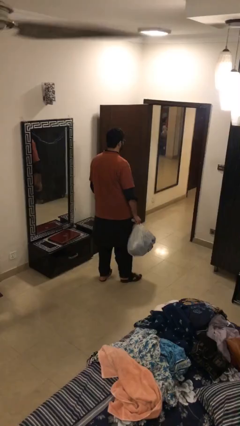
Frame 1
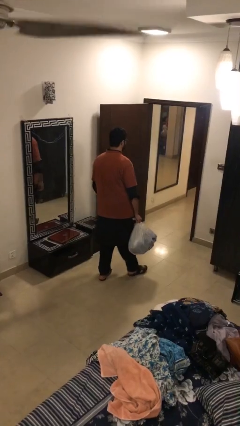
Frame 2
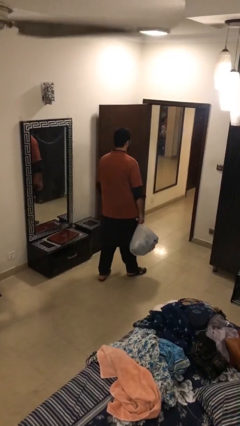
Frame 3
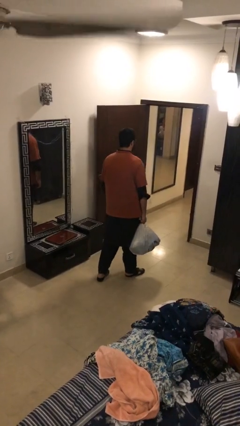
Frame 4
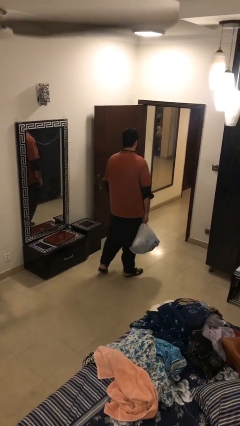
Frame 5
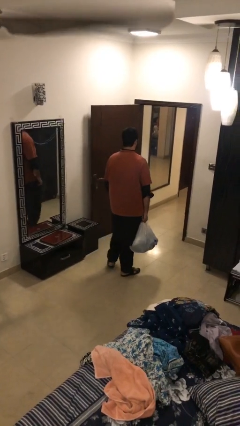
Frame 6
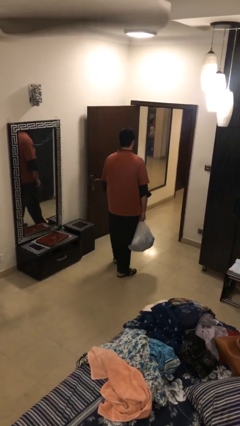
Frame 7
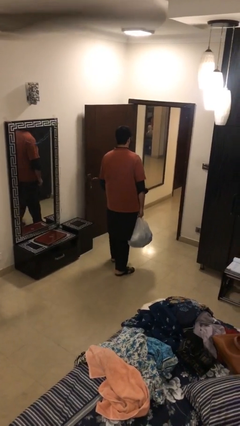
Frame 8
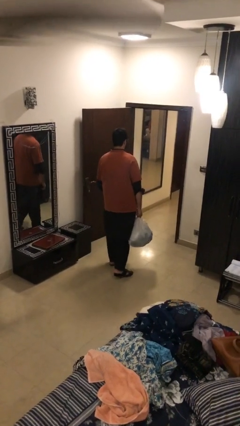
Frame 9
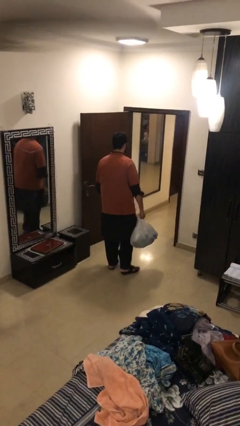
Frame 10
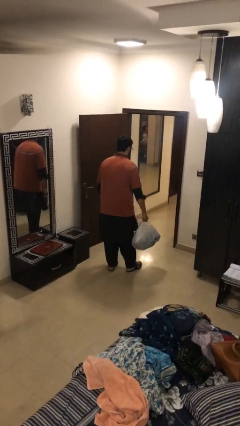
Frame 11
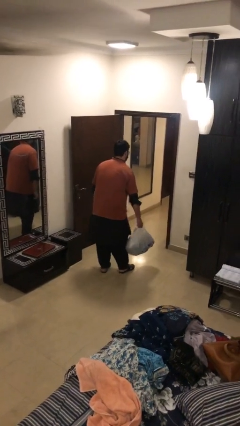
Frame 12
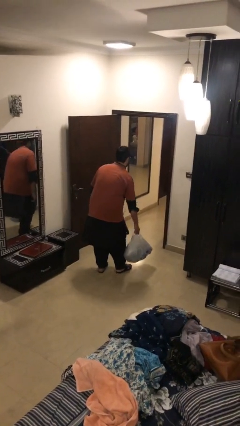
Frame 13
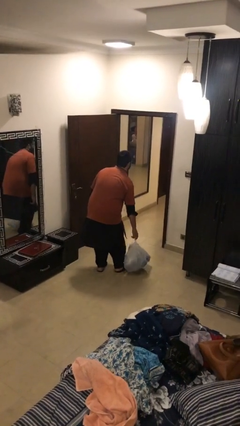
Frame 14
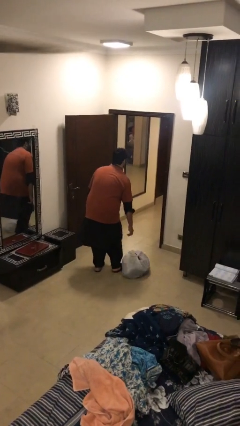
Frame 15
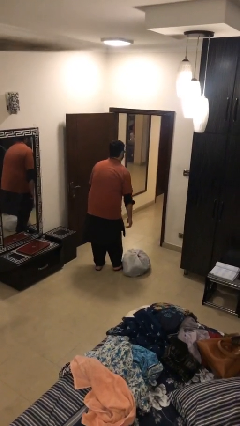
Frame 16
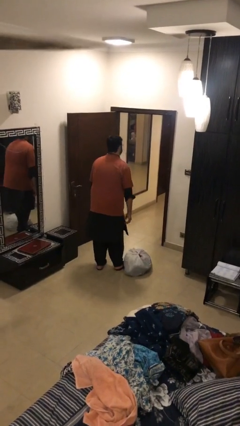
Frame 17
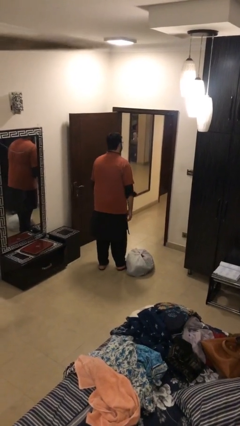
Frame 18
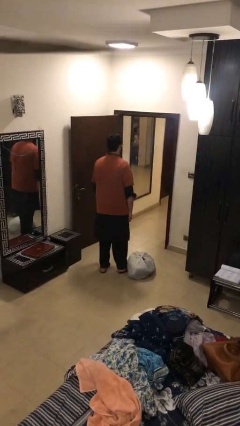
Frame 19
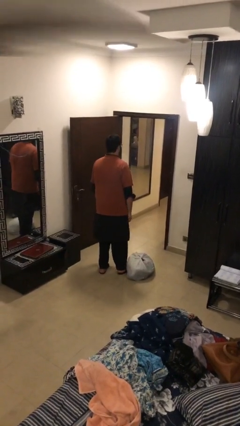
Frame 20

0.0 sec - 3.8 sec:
person puts down object on floor

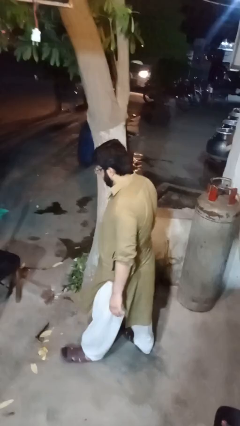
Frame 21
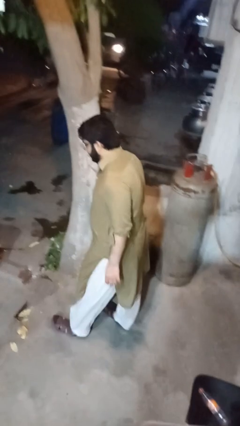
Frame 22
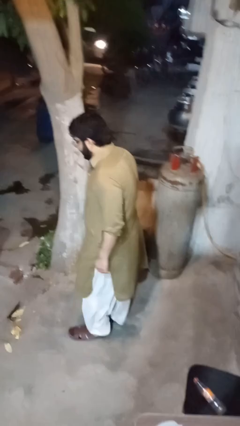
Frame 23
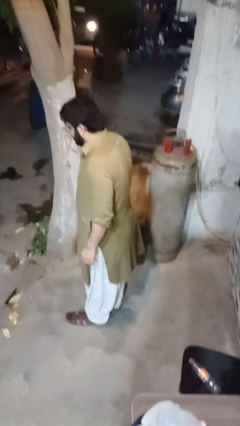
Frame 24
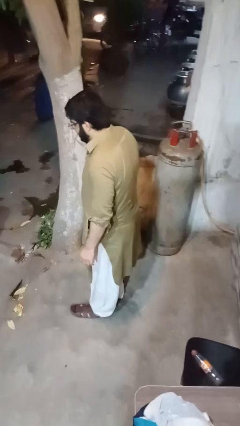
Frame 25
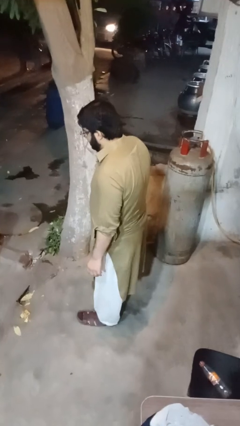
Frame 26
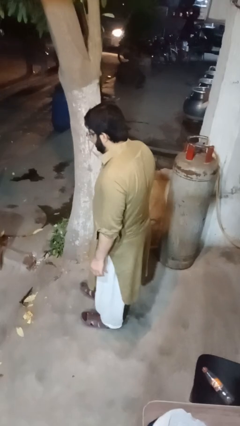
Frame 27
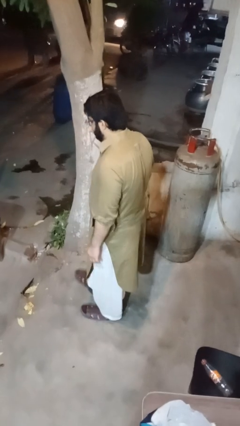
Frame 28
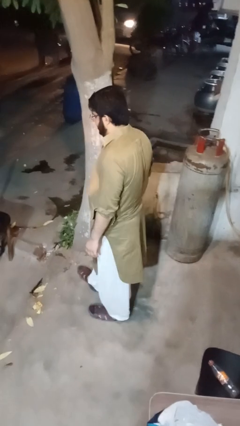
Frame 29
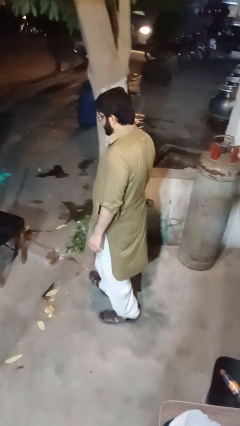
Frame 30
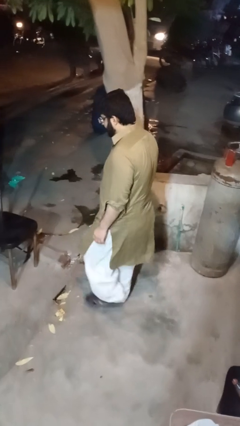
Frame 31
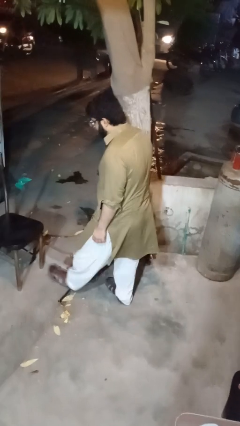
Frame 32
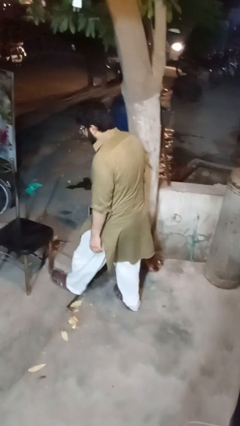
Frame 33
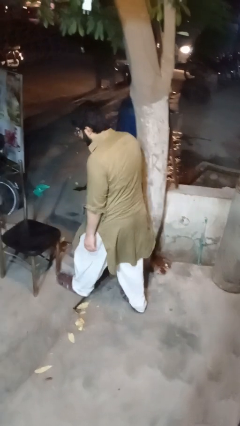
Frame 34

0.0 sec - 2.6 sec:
person trips on object on floor

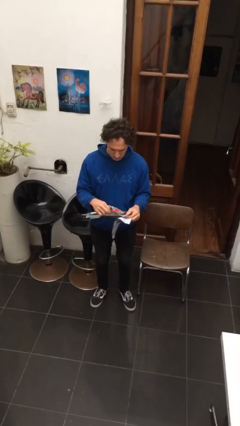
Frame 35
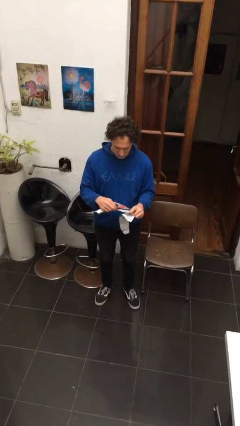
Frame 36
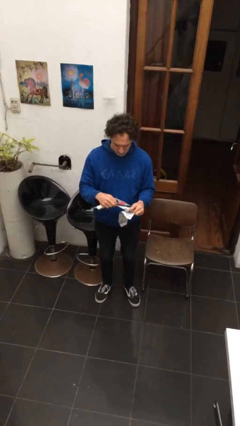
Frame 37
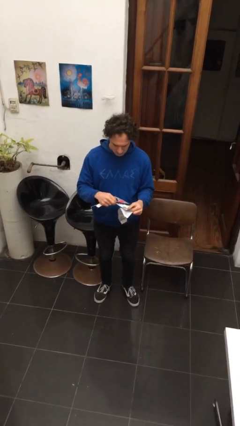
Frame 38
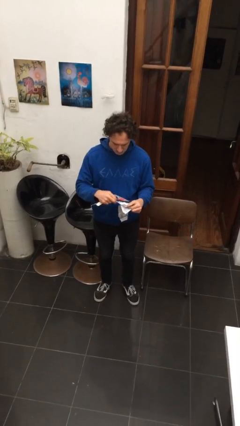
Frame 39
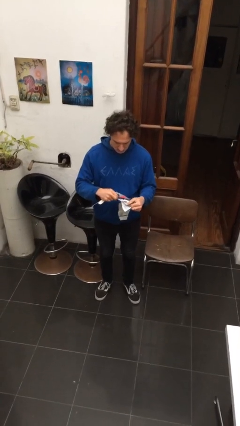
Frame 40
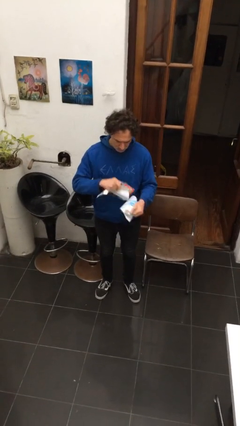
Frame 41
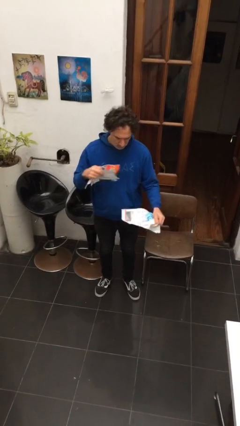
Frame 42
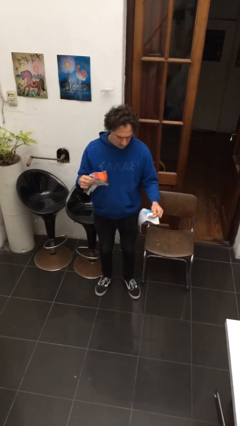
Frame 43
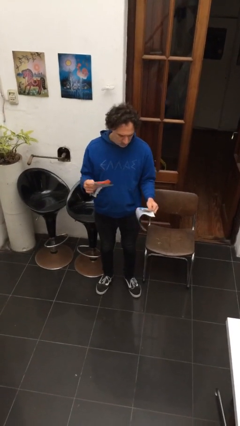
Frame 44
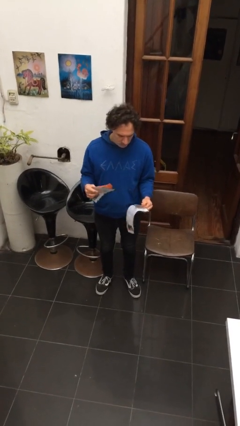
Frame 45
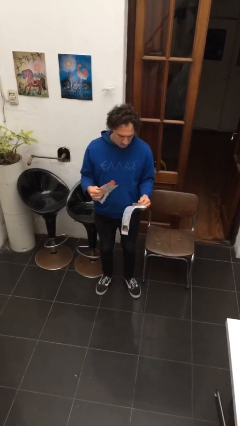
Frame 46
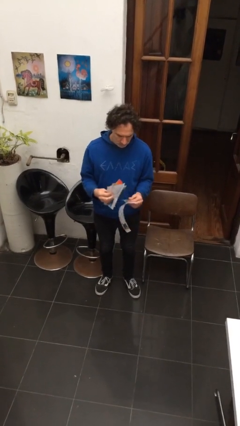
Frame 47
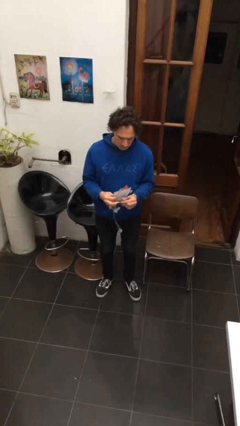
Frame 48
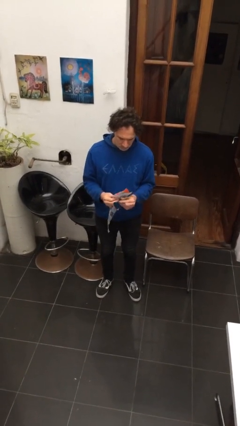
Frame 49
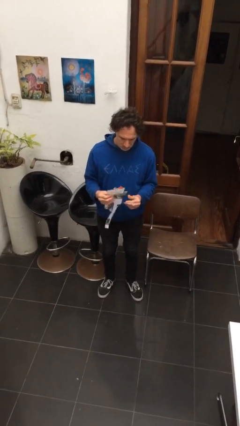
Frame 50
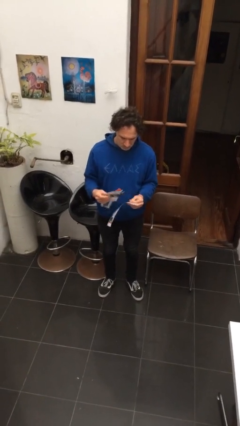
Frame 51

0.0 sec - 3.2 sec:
person tears paper

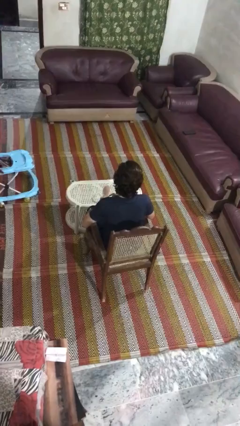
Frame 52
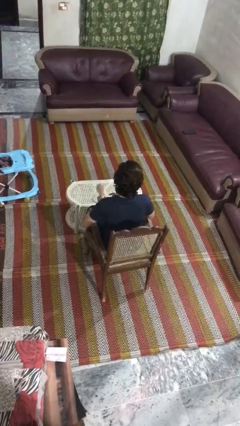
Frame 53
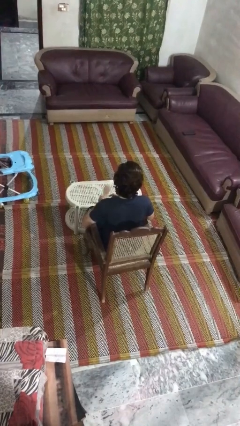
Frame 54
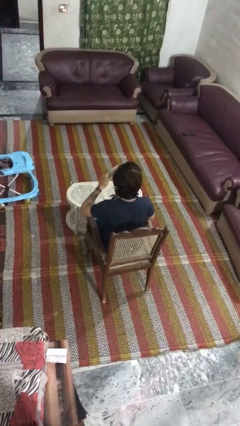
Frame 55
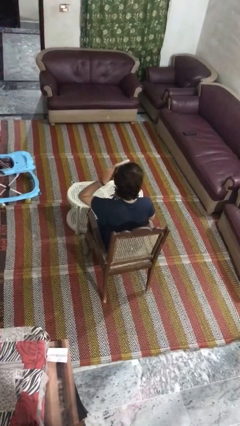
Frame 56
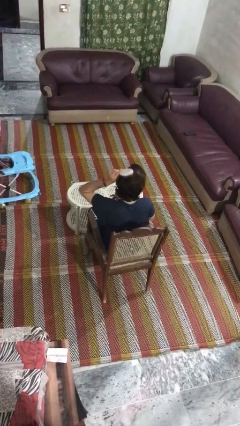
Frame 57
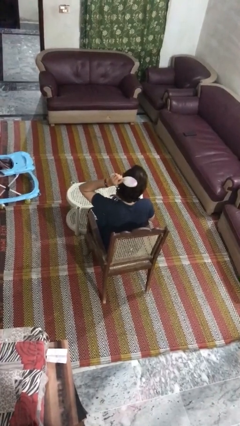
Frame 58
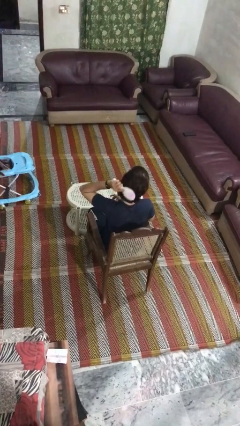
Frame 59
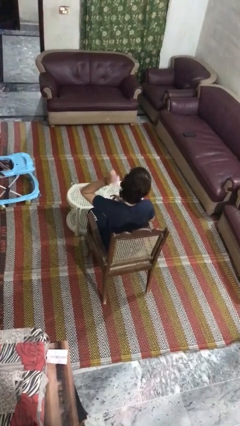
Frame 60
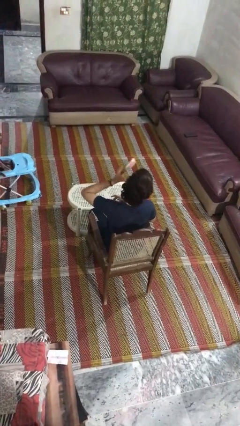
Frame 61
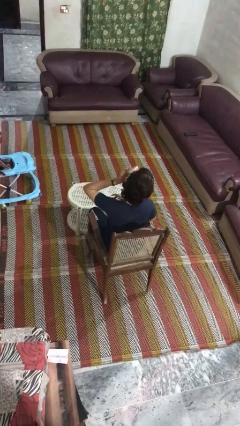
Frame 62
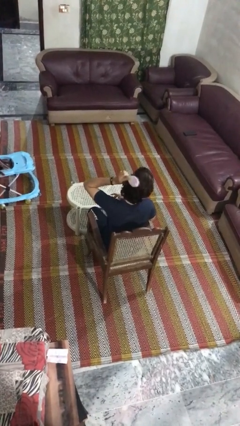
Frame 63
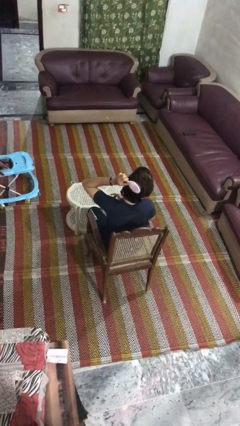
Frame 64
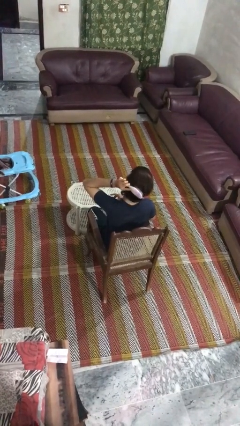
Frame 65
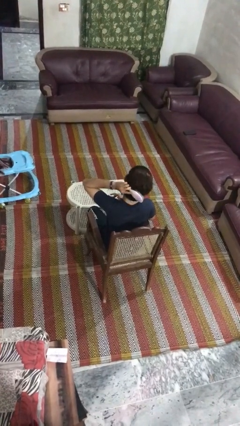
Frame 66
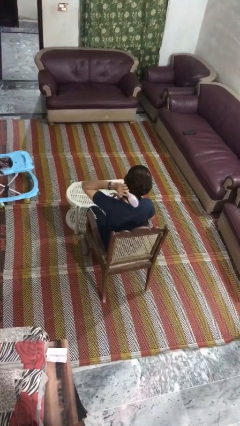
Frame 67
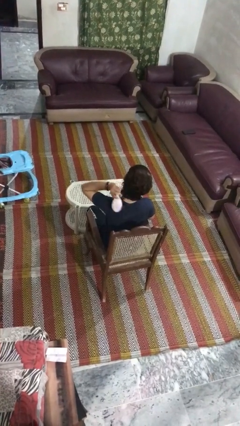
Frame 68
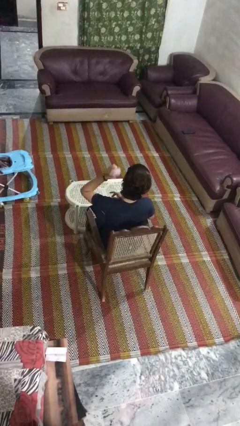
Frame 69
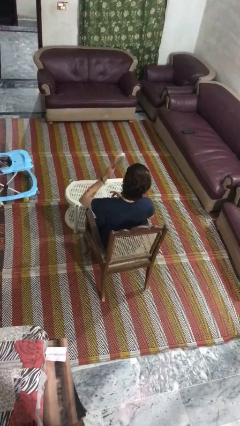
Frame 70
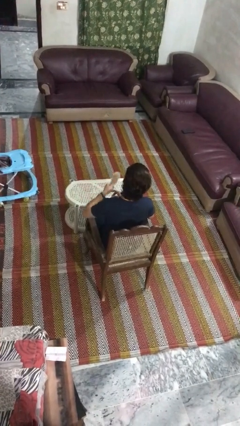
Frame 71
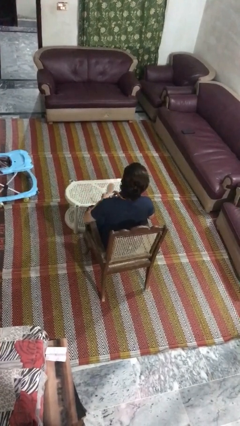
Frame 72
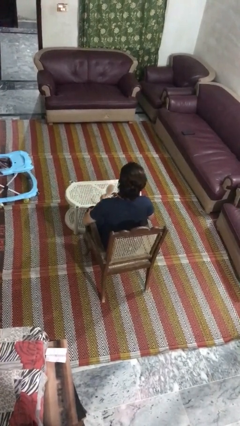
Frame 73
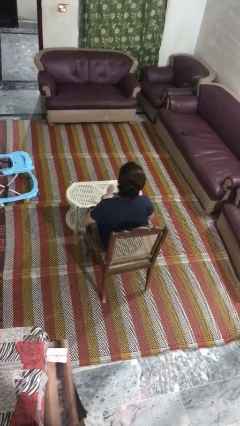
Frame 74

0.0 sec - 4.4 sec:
person brushes hair

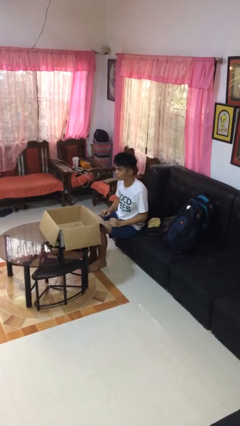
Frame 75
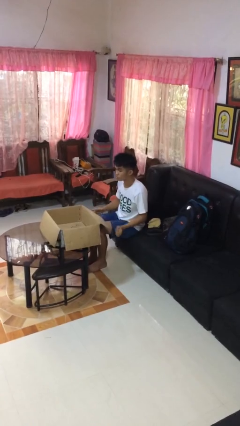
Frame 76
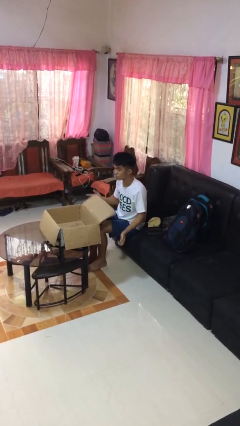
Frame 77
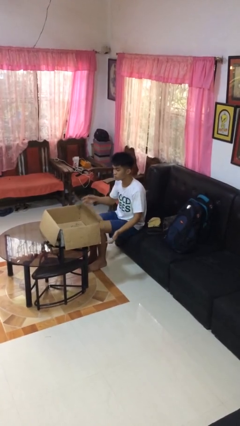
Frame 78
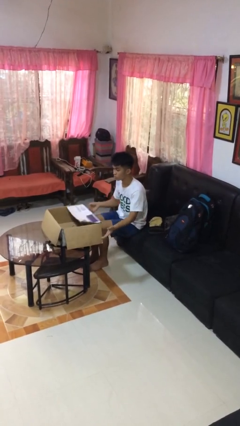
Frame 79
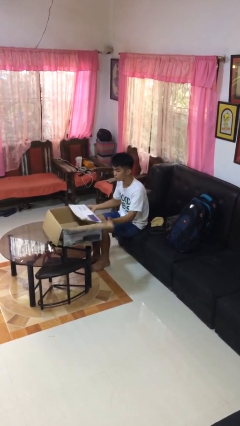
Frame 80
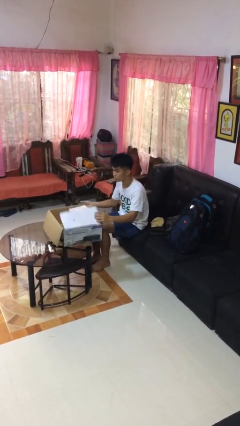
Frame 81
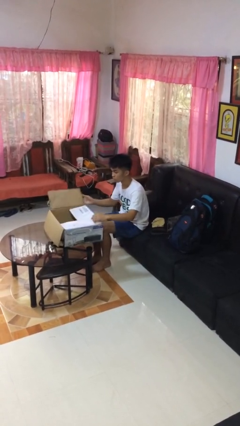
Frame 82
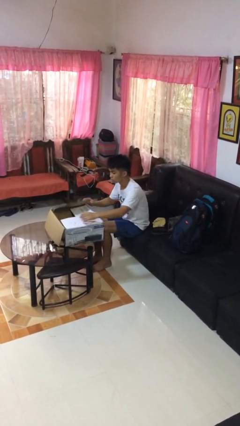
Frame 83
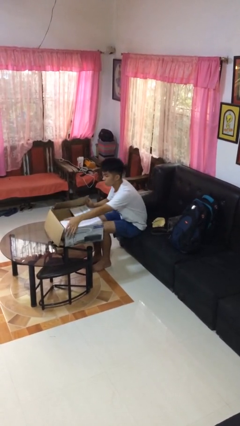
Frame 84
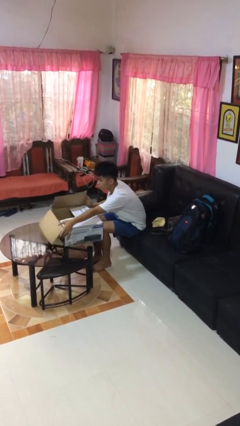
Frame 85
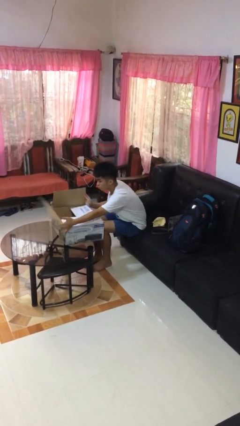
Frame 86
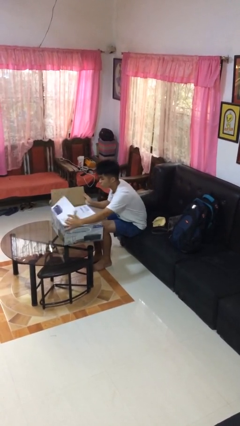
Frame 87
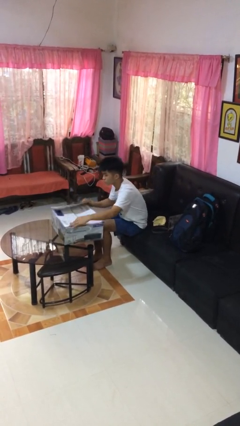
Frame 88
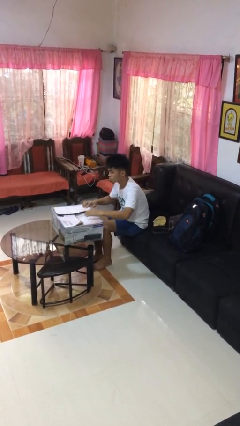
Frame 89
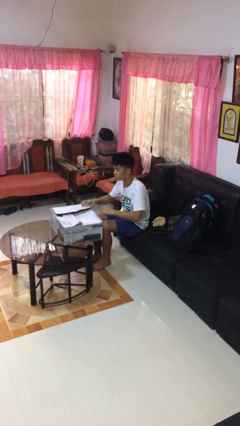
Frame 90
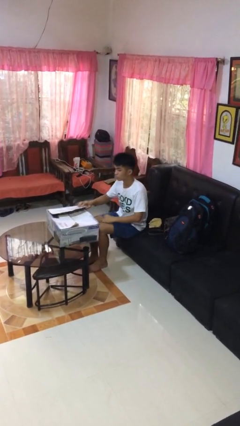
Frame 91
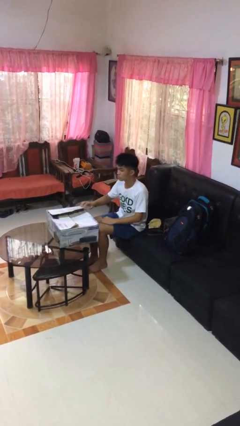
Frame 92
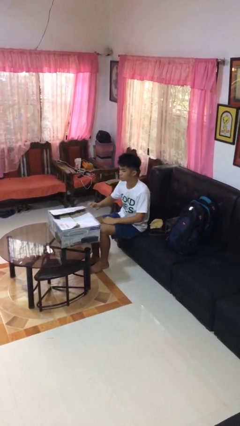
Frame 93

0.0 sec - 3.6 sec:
person closes box
